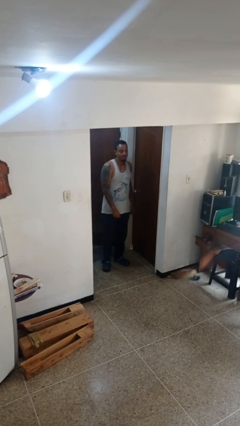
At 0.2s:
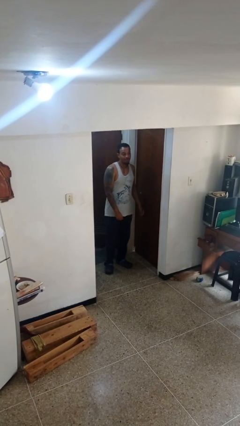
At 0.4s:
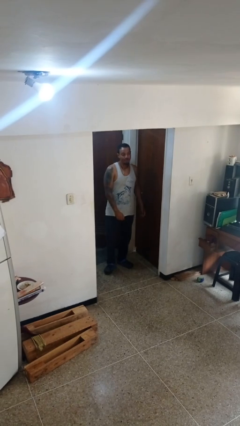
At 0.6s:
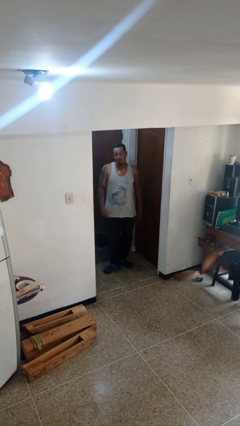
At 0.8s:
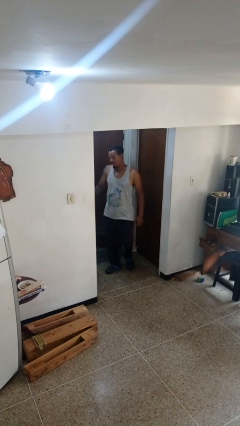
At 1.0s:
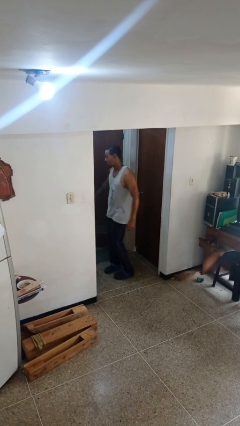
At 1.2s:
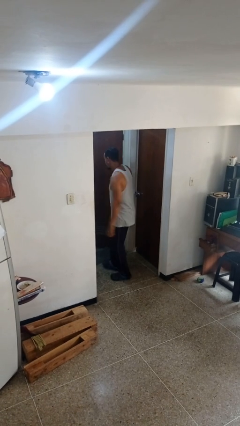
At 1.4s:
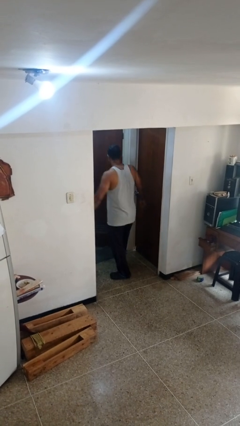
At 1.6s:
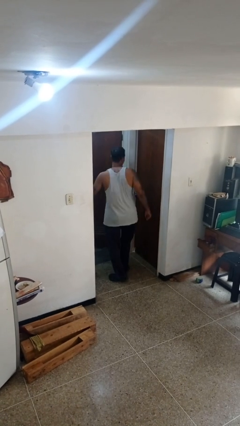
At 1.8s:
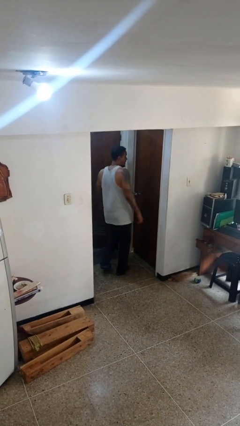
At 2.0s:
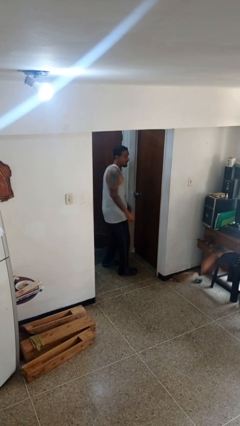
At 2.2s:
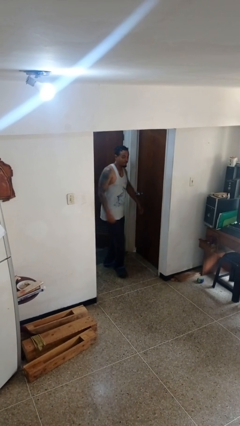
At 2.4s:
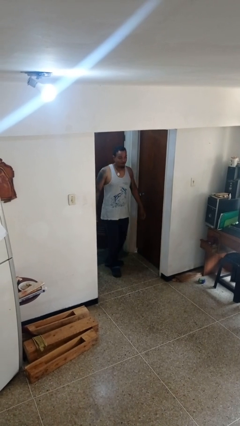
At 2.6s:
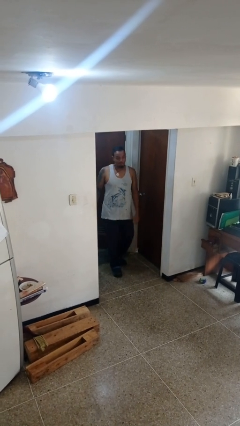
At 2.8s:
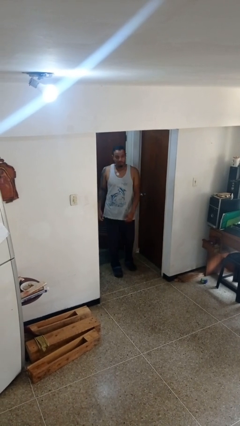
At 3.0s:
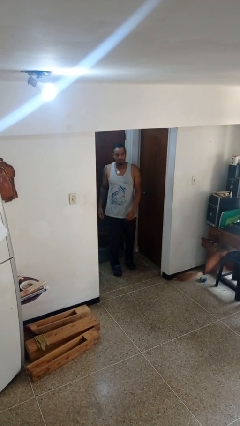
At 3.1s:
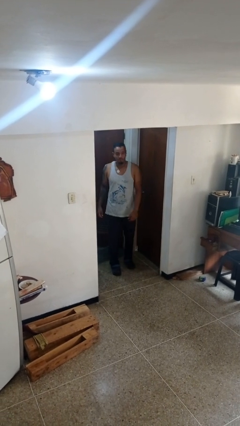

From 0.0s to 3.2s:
person twirls

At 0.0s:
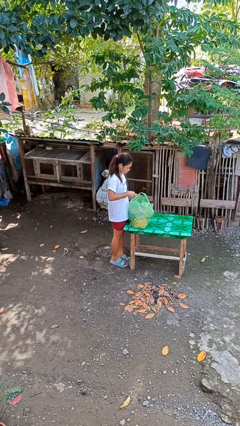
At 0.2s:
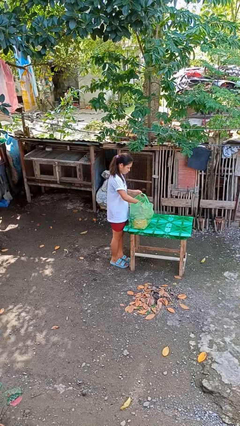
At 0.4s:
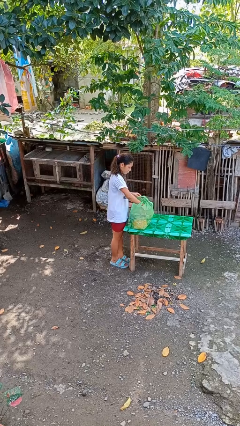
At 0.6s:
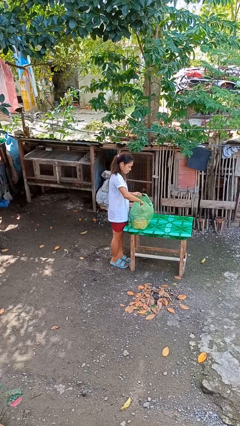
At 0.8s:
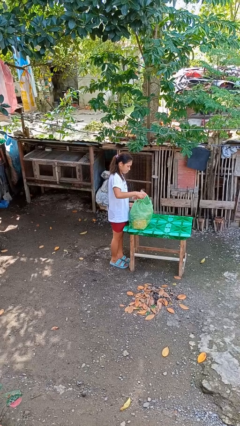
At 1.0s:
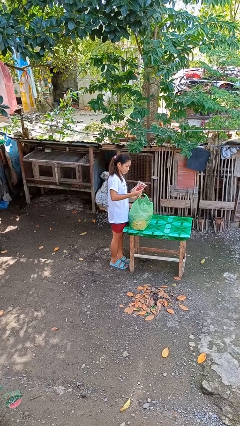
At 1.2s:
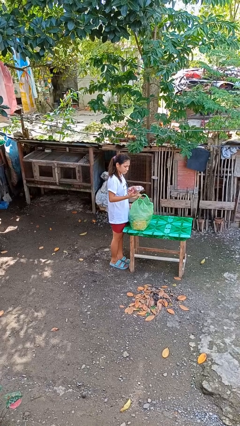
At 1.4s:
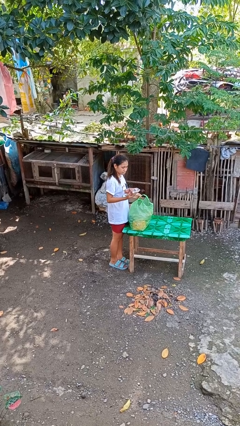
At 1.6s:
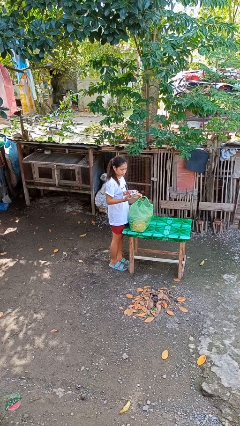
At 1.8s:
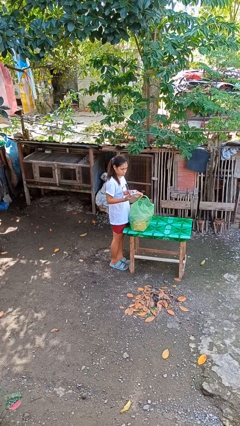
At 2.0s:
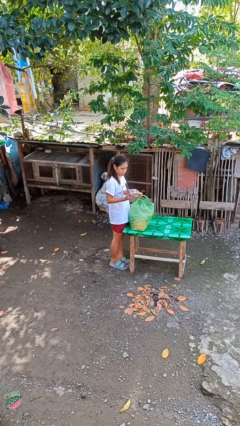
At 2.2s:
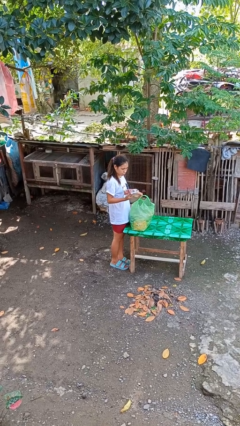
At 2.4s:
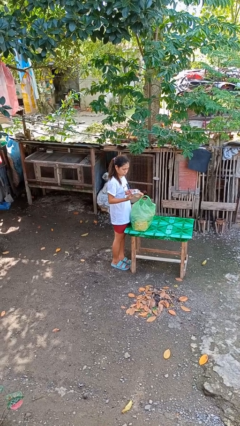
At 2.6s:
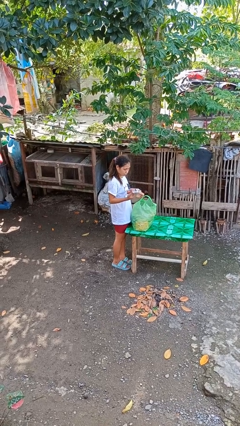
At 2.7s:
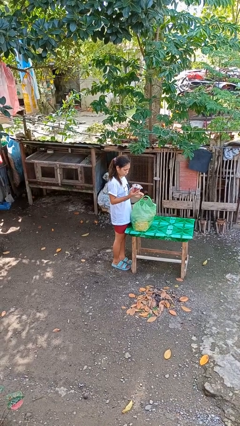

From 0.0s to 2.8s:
person takes object from bag

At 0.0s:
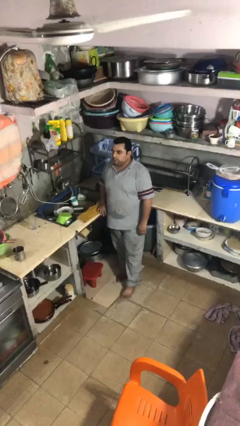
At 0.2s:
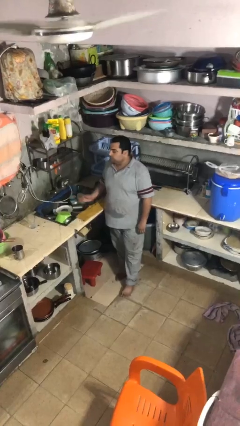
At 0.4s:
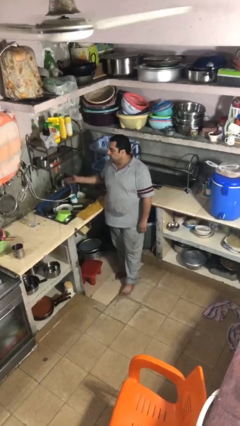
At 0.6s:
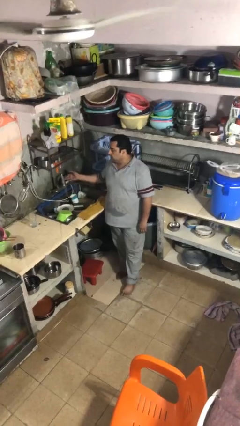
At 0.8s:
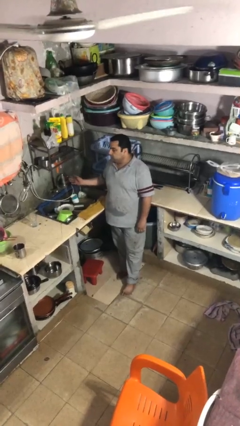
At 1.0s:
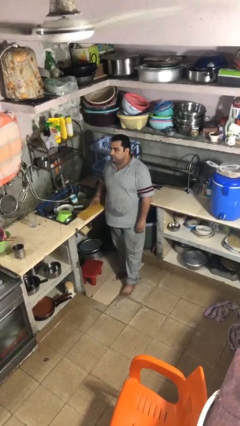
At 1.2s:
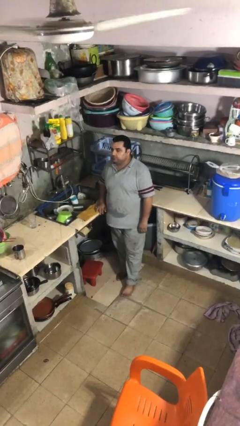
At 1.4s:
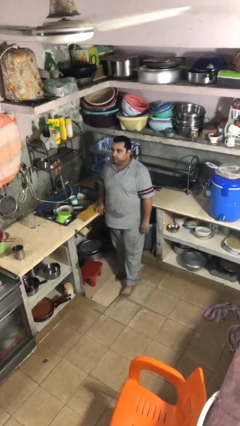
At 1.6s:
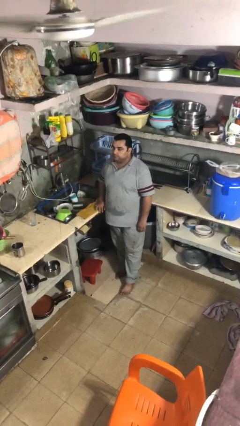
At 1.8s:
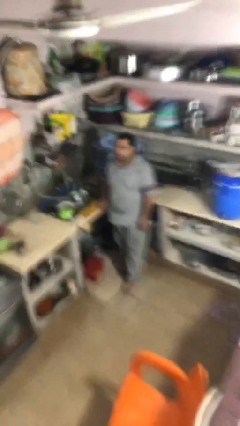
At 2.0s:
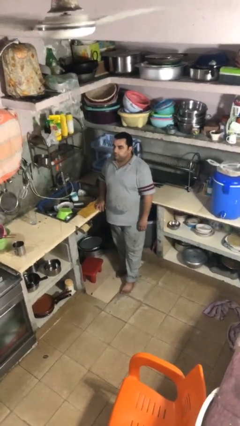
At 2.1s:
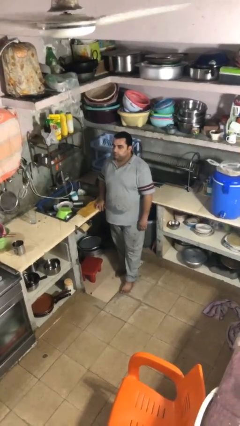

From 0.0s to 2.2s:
person turns on faucet

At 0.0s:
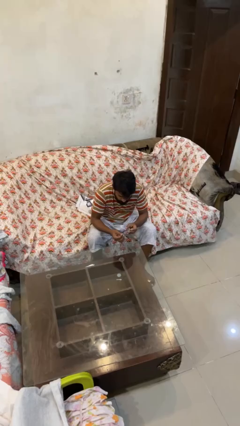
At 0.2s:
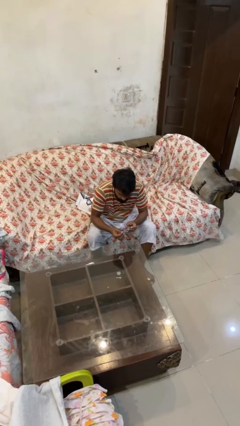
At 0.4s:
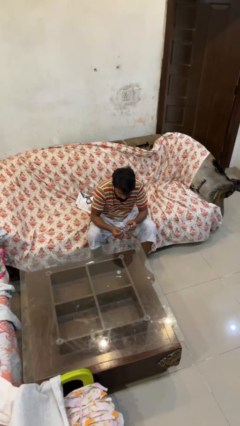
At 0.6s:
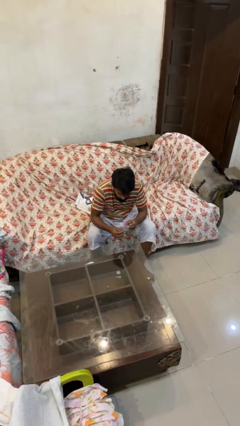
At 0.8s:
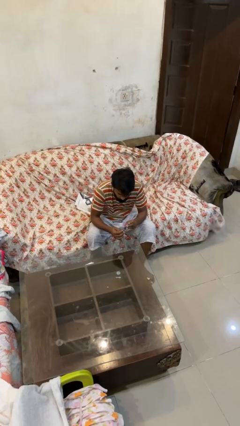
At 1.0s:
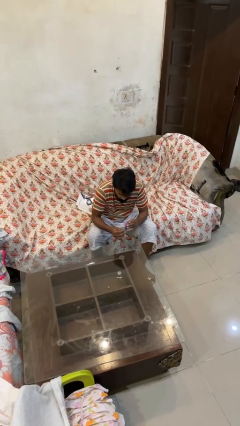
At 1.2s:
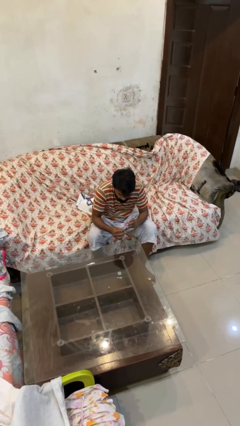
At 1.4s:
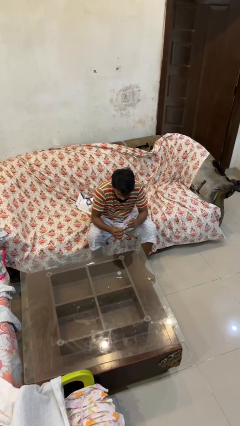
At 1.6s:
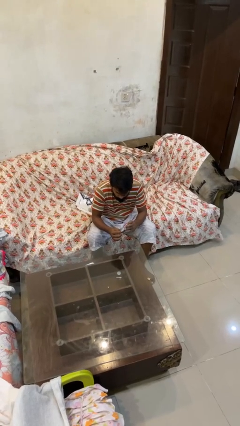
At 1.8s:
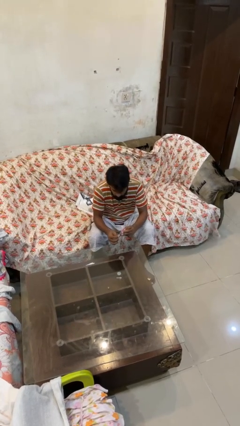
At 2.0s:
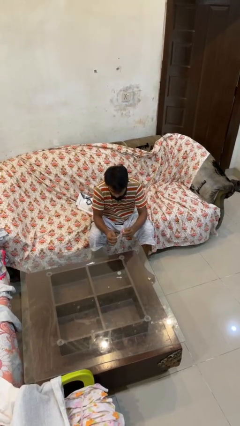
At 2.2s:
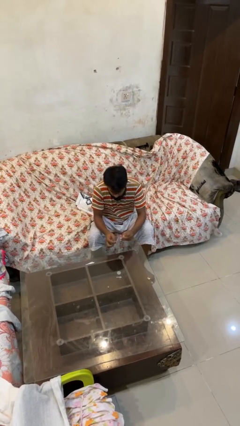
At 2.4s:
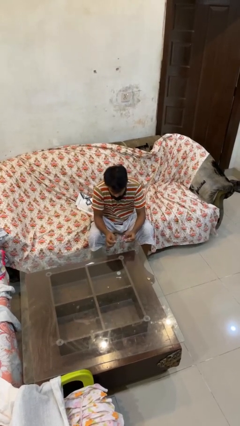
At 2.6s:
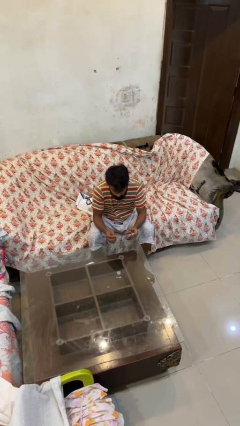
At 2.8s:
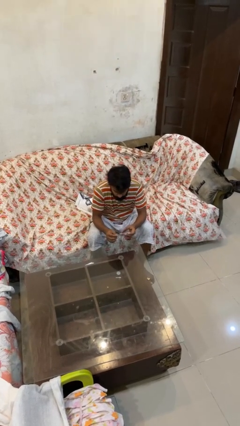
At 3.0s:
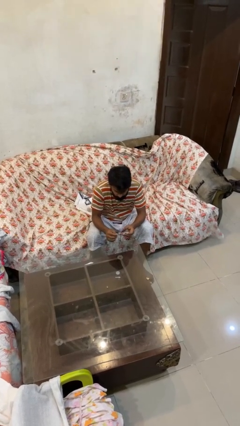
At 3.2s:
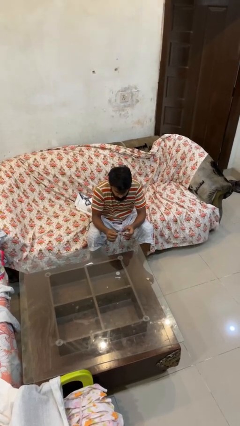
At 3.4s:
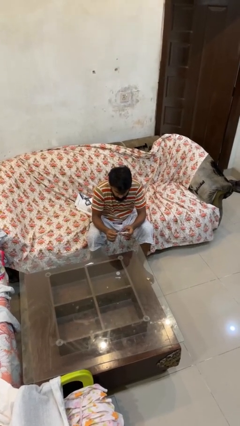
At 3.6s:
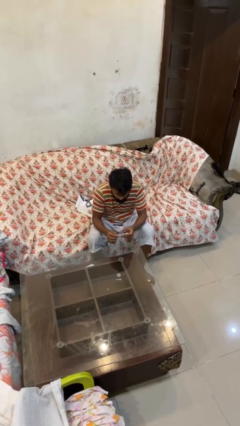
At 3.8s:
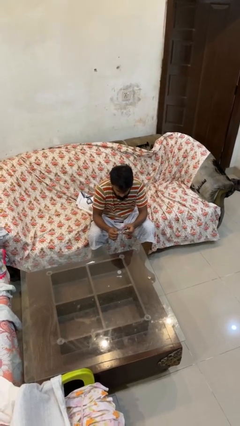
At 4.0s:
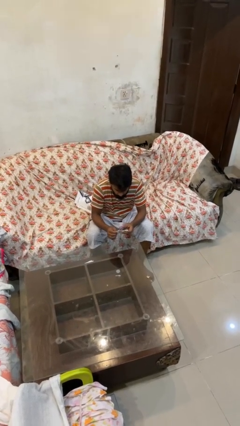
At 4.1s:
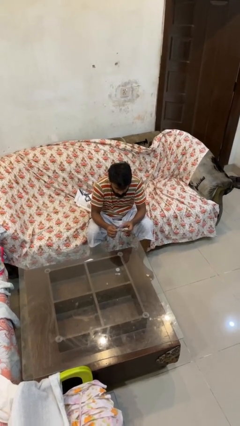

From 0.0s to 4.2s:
person clips fingernails

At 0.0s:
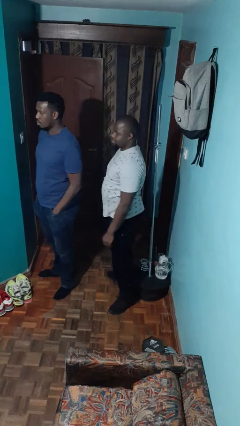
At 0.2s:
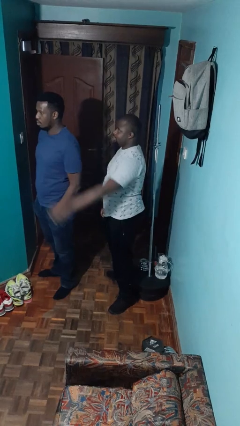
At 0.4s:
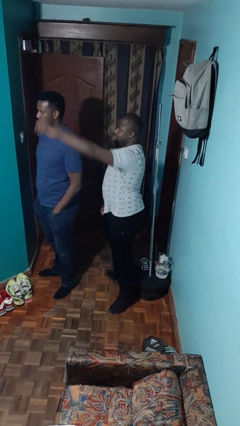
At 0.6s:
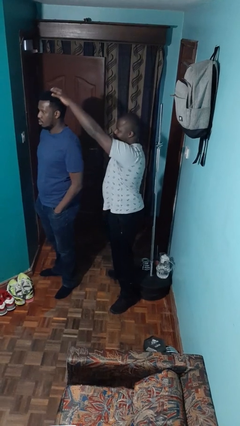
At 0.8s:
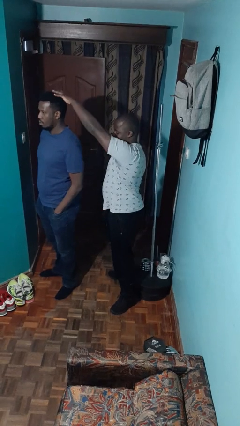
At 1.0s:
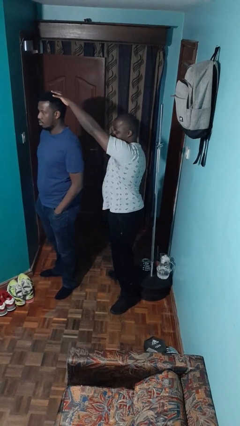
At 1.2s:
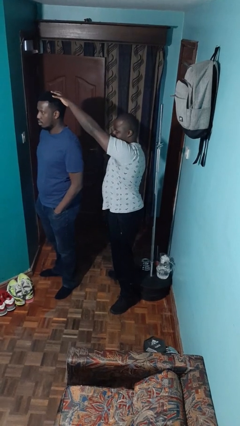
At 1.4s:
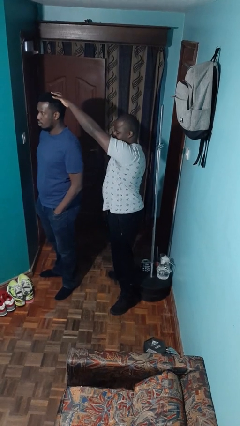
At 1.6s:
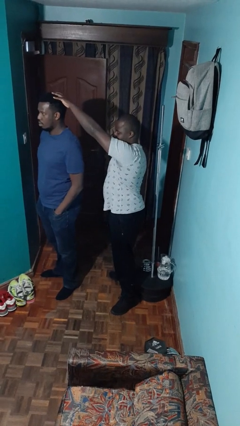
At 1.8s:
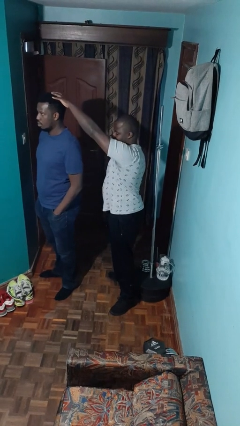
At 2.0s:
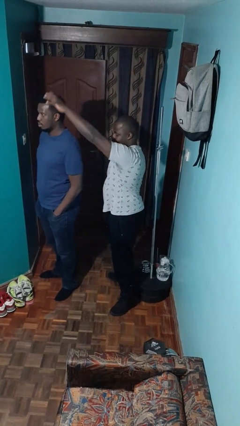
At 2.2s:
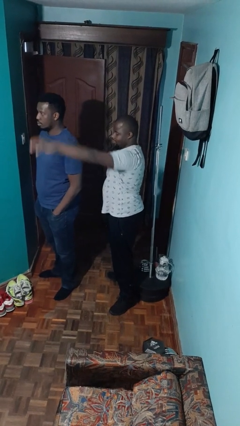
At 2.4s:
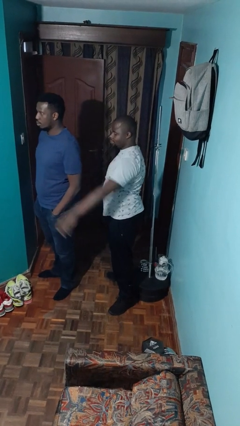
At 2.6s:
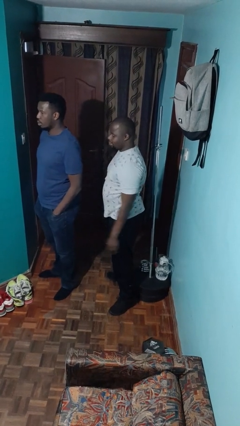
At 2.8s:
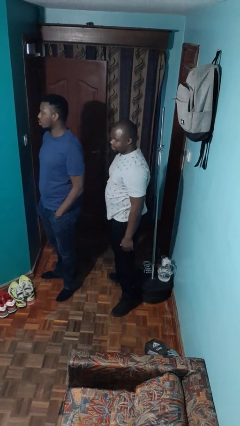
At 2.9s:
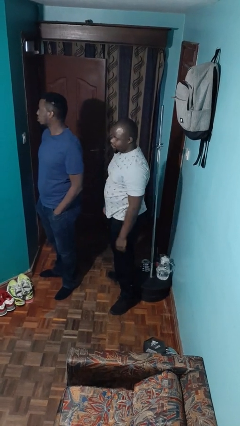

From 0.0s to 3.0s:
person grabs person by hair

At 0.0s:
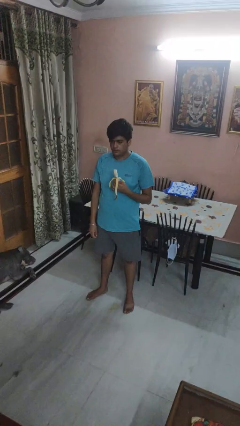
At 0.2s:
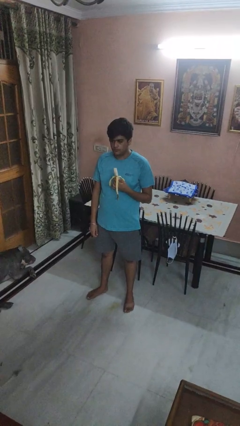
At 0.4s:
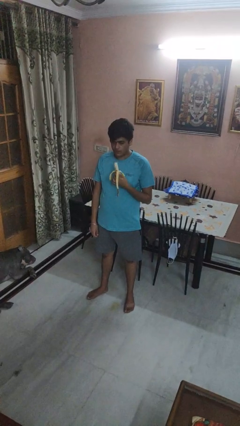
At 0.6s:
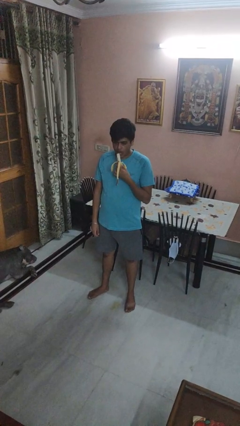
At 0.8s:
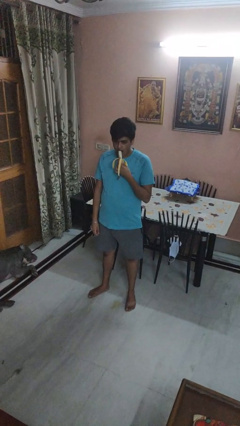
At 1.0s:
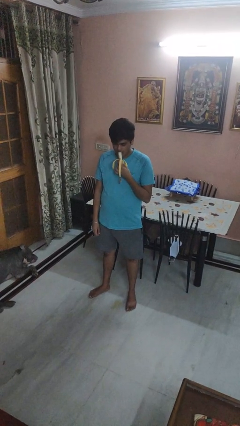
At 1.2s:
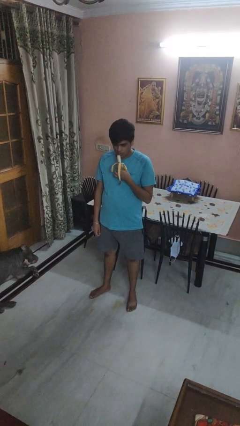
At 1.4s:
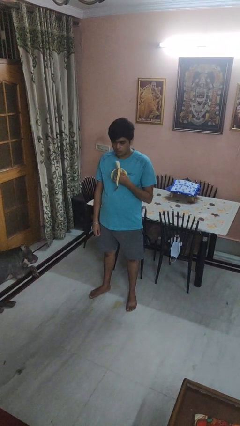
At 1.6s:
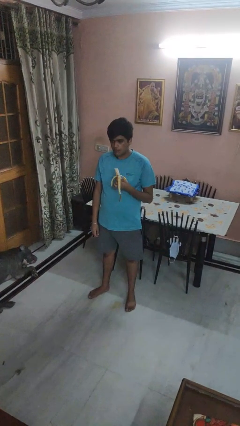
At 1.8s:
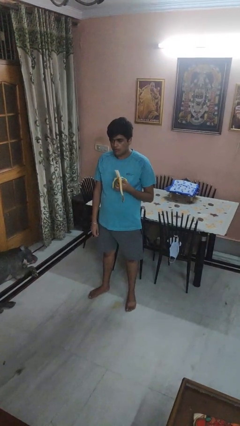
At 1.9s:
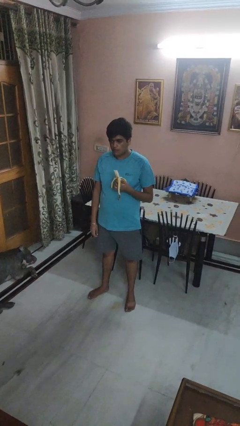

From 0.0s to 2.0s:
person eats banana
